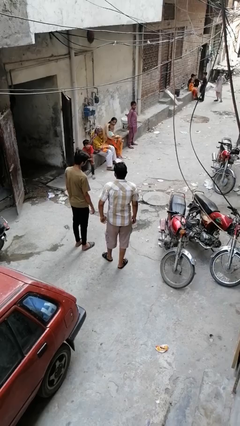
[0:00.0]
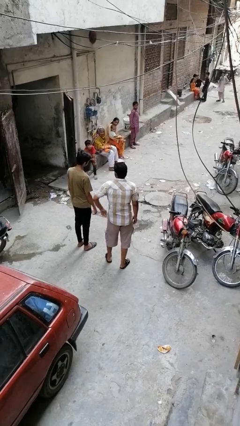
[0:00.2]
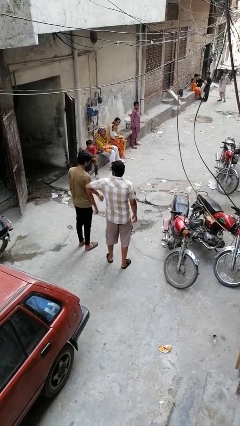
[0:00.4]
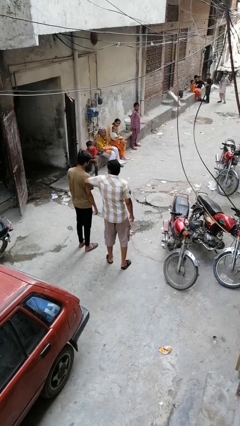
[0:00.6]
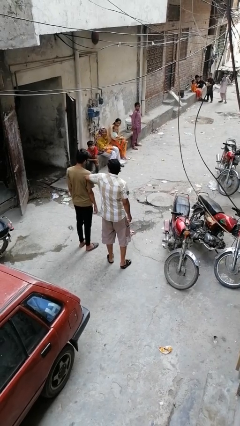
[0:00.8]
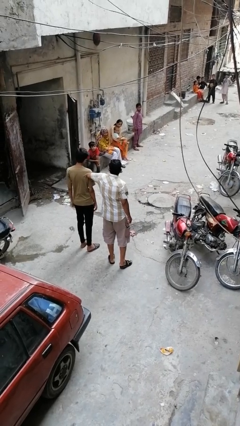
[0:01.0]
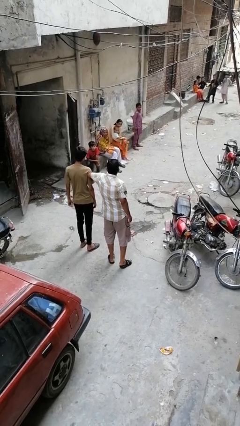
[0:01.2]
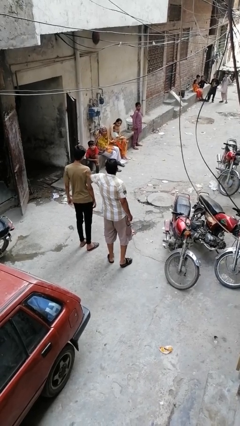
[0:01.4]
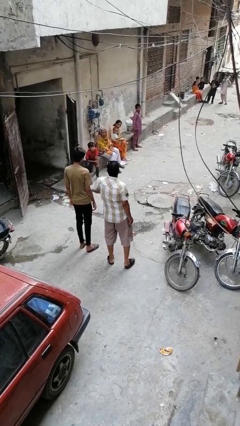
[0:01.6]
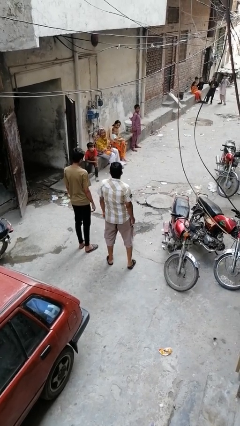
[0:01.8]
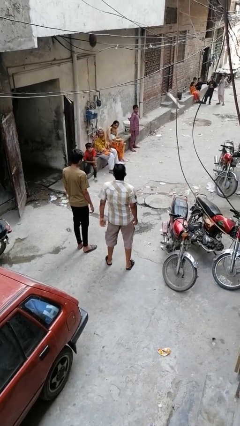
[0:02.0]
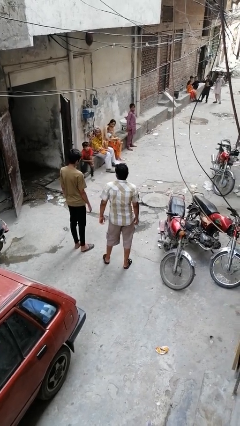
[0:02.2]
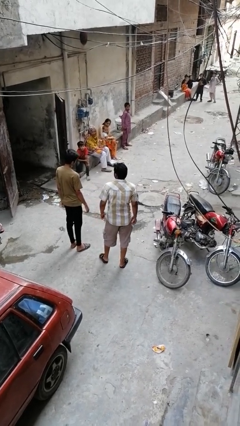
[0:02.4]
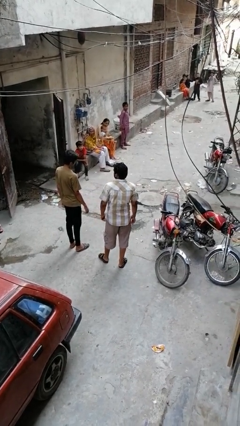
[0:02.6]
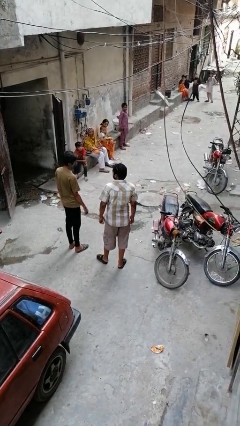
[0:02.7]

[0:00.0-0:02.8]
person nudges person with elbow

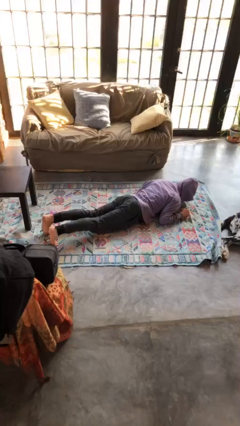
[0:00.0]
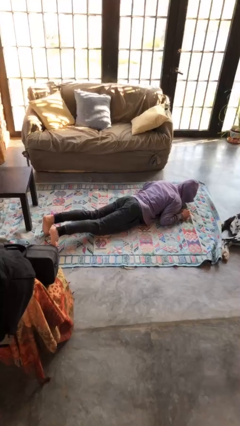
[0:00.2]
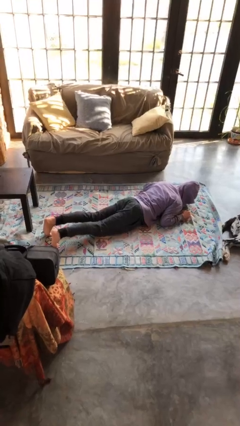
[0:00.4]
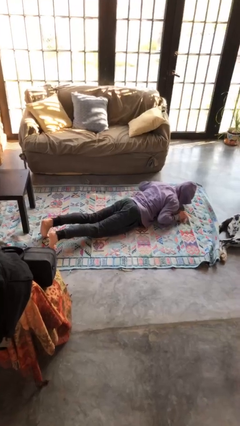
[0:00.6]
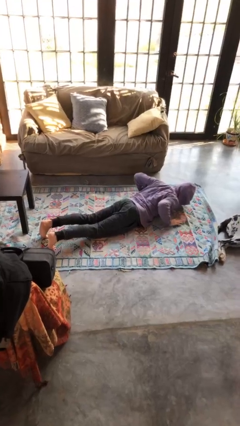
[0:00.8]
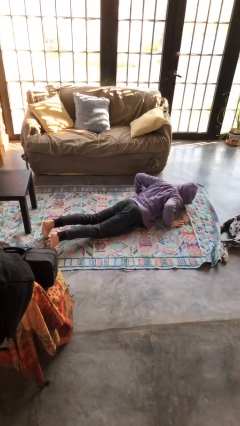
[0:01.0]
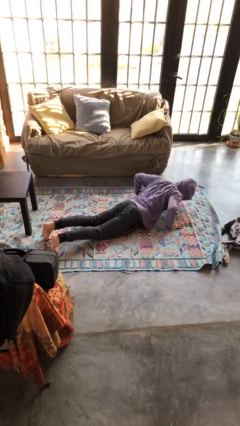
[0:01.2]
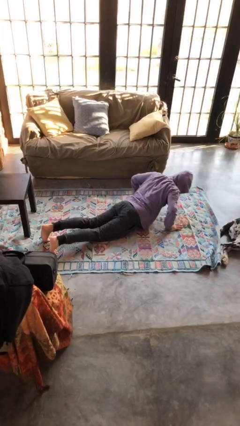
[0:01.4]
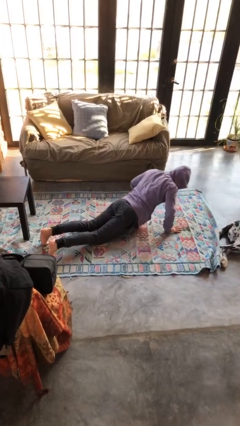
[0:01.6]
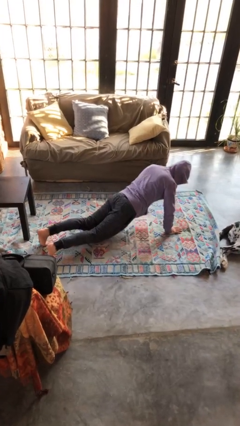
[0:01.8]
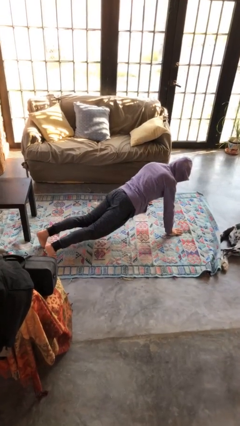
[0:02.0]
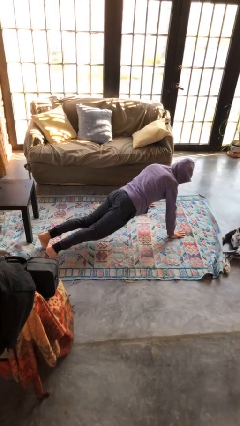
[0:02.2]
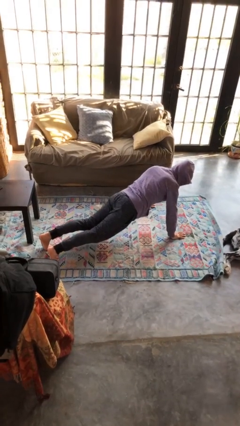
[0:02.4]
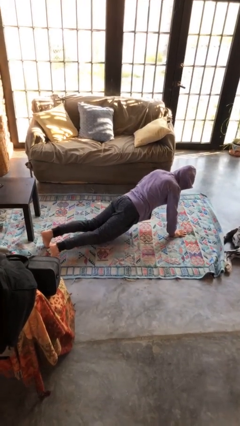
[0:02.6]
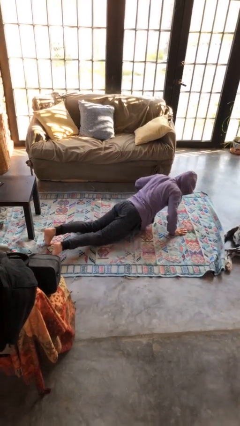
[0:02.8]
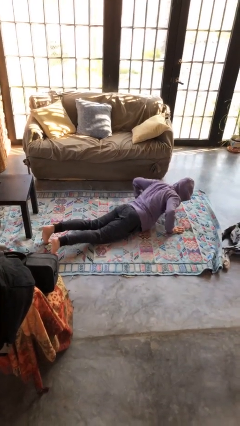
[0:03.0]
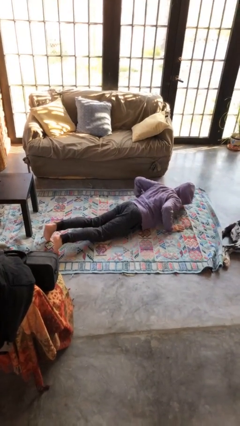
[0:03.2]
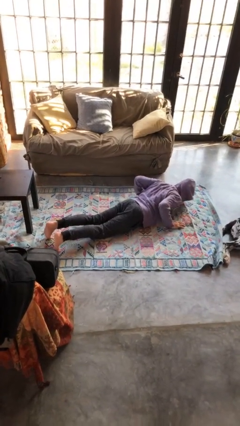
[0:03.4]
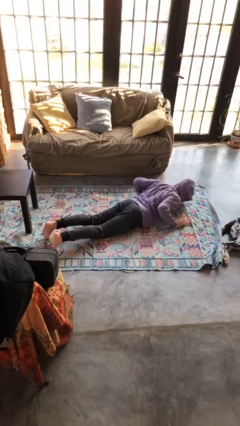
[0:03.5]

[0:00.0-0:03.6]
person exercises with pushup

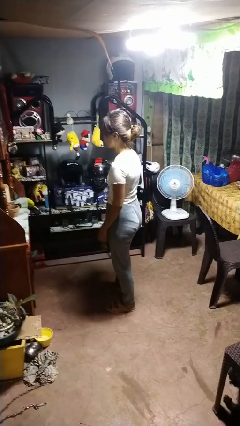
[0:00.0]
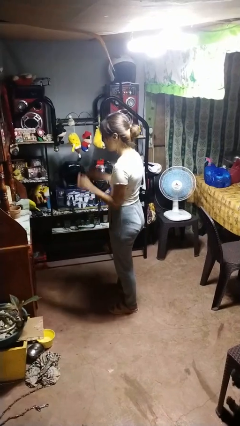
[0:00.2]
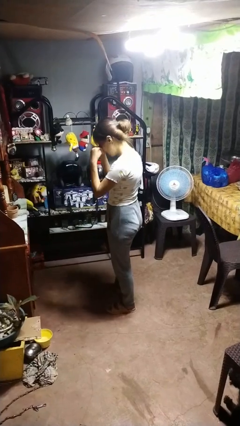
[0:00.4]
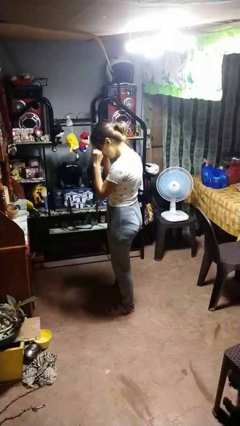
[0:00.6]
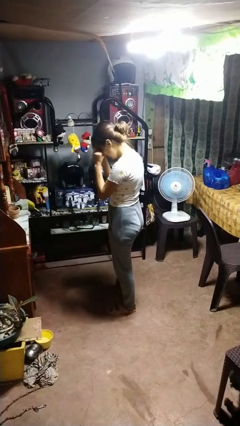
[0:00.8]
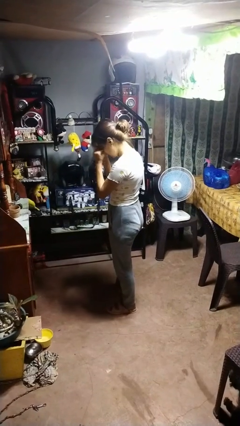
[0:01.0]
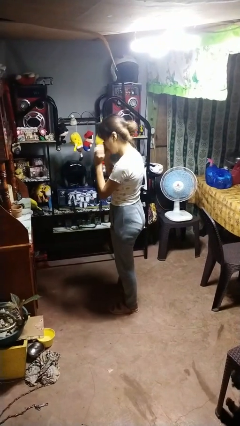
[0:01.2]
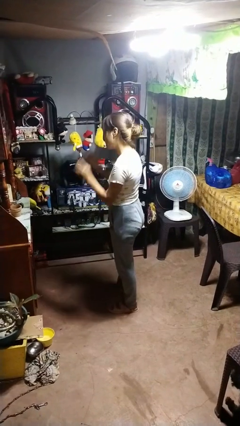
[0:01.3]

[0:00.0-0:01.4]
person rubs eyes

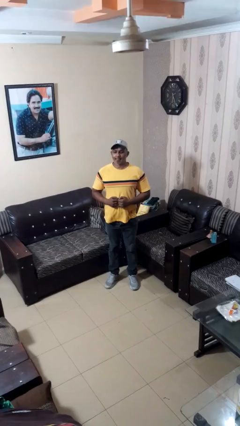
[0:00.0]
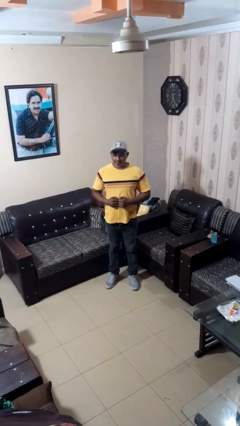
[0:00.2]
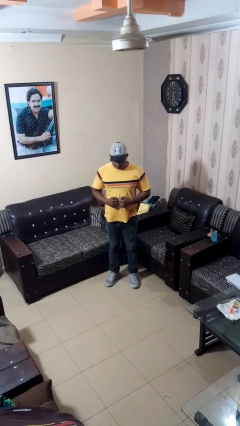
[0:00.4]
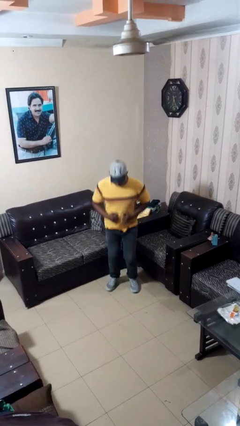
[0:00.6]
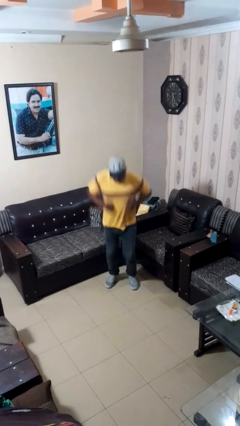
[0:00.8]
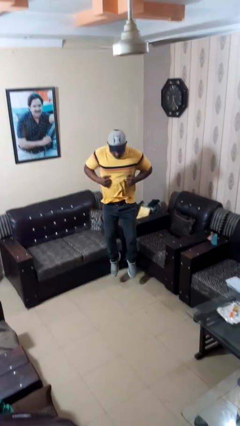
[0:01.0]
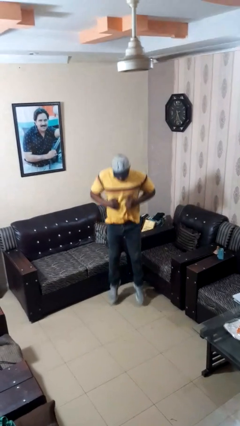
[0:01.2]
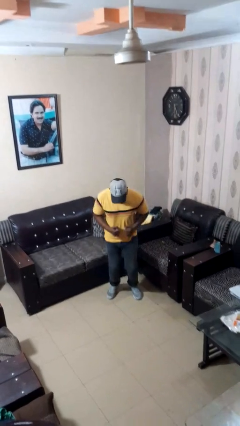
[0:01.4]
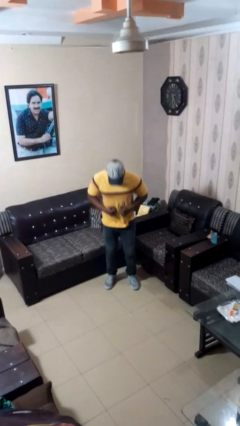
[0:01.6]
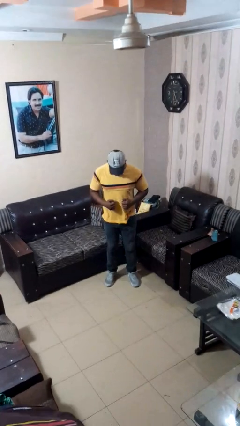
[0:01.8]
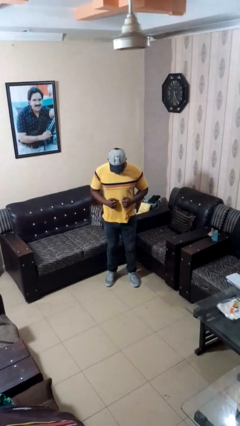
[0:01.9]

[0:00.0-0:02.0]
person jumps

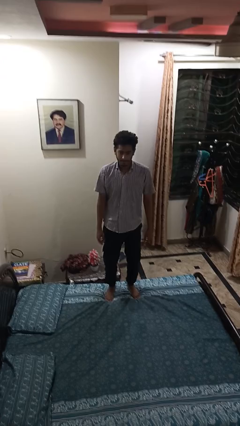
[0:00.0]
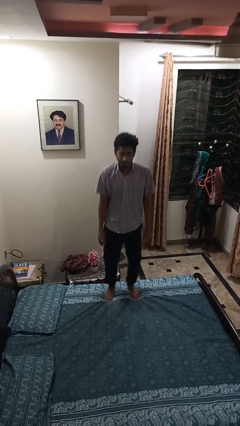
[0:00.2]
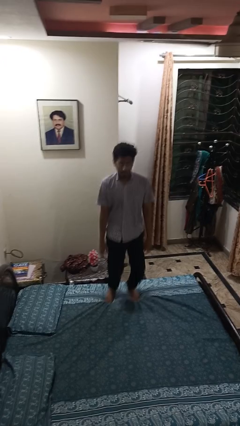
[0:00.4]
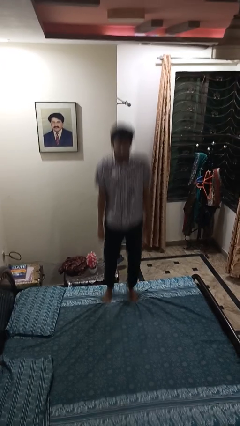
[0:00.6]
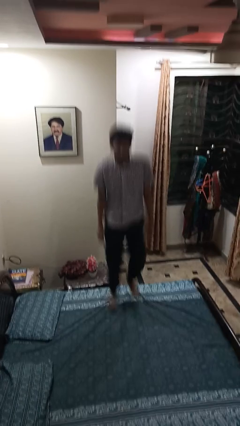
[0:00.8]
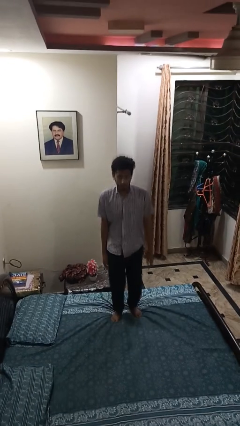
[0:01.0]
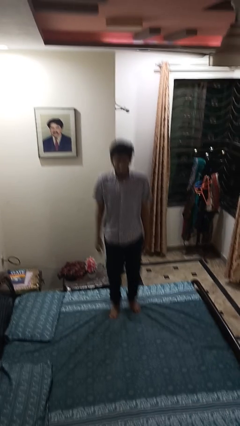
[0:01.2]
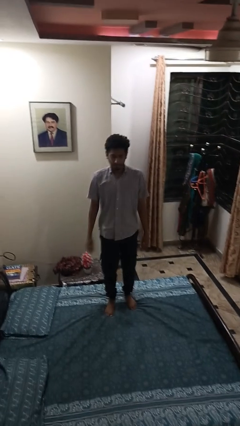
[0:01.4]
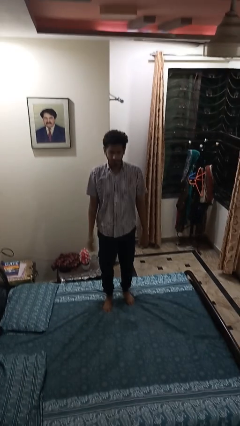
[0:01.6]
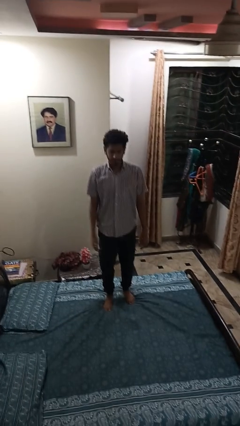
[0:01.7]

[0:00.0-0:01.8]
person jumps on bed

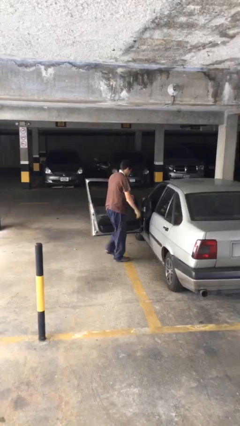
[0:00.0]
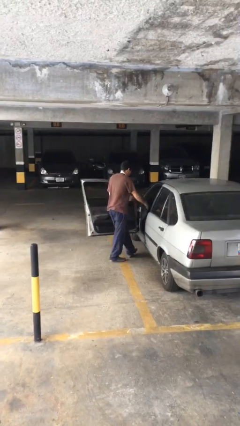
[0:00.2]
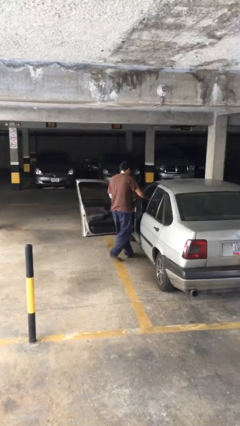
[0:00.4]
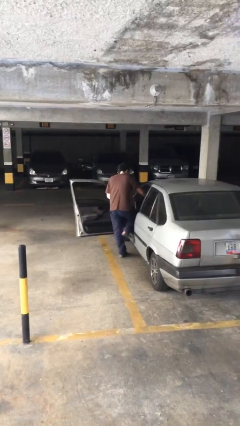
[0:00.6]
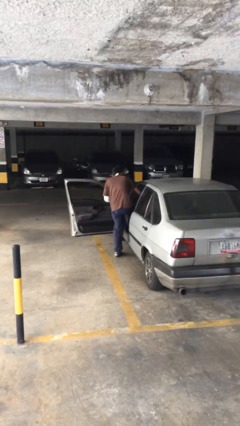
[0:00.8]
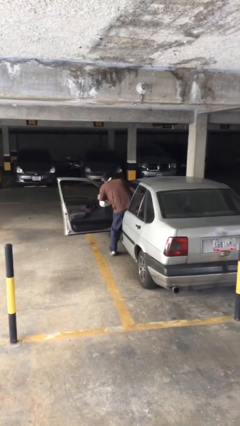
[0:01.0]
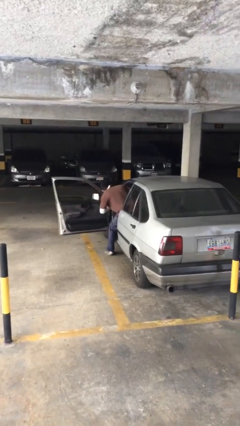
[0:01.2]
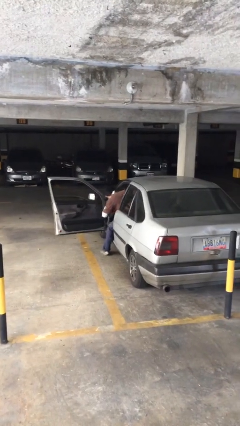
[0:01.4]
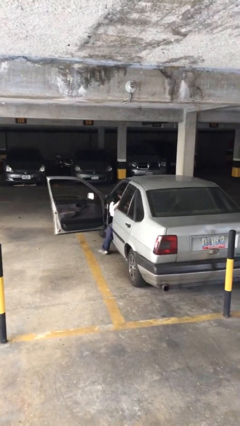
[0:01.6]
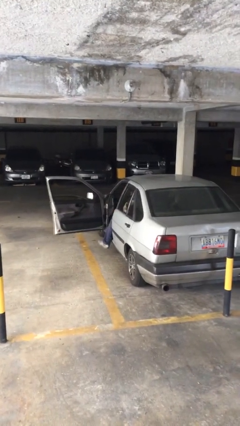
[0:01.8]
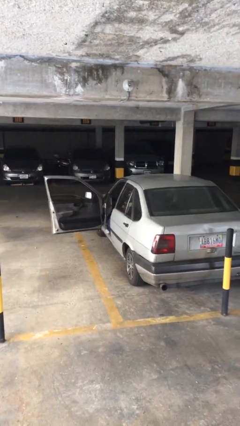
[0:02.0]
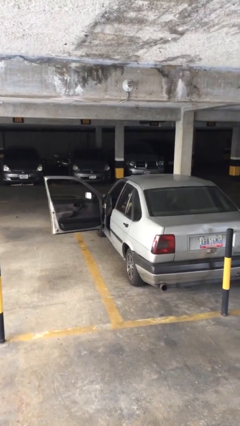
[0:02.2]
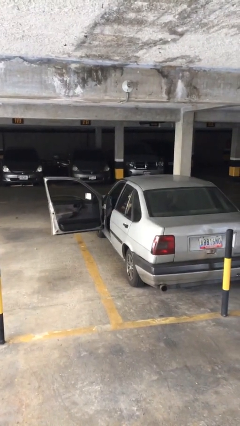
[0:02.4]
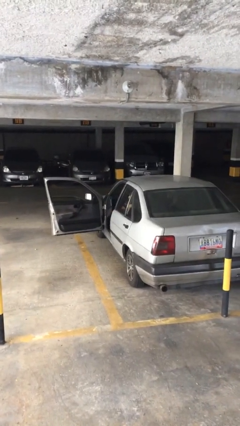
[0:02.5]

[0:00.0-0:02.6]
person enters car

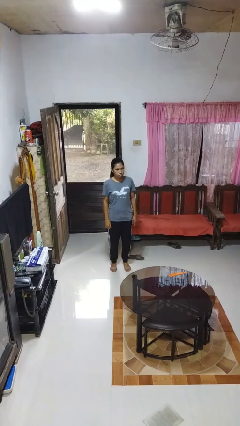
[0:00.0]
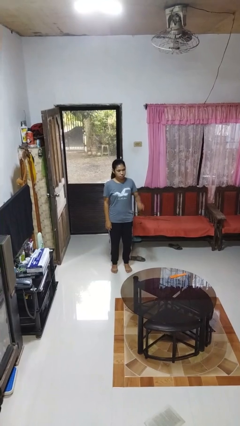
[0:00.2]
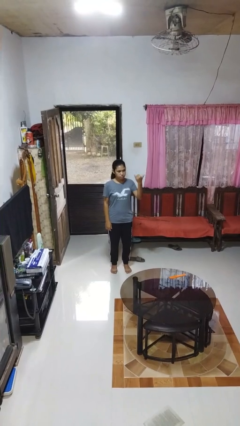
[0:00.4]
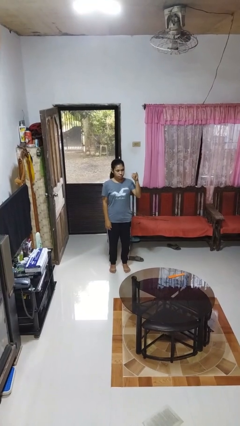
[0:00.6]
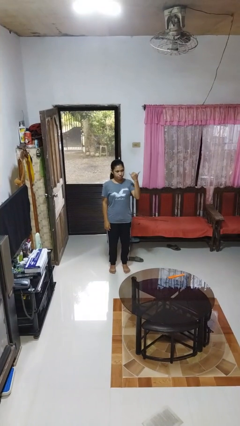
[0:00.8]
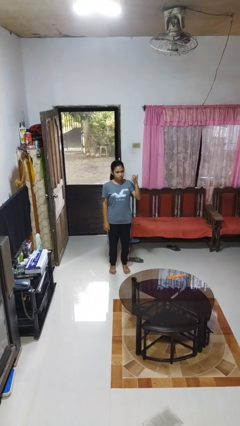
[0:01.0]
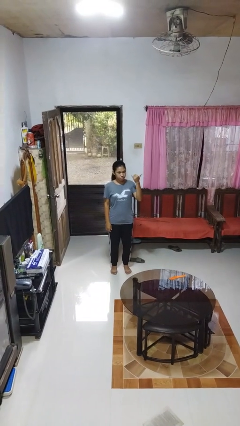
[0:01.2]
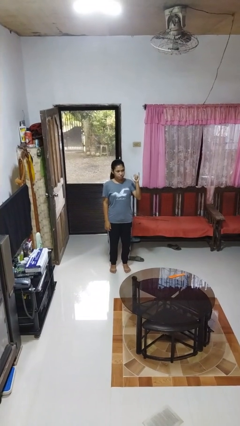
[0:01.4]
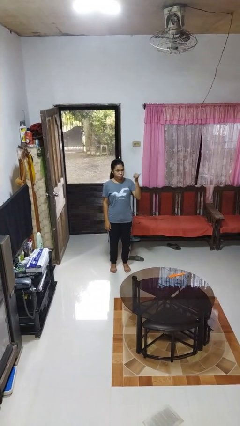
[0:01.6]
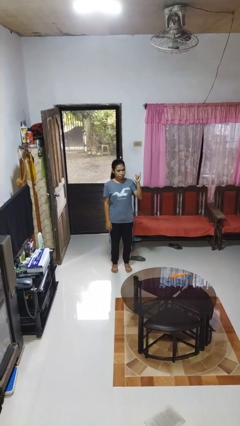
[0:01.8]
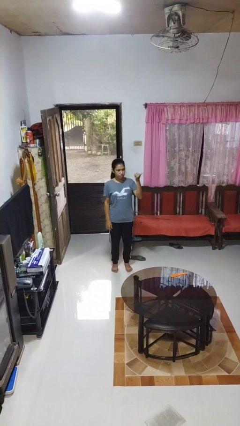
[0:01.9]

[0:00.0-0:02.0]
person gestures hang loose

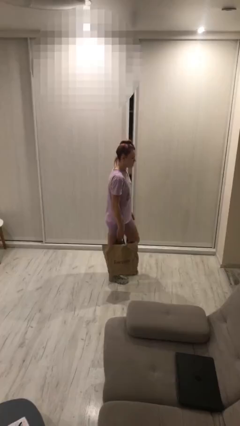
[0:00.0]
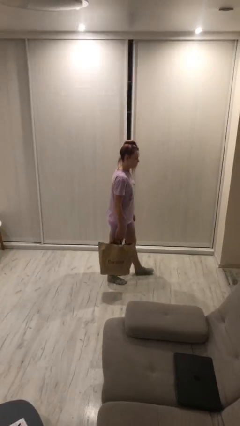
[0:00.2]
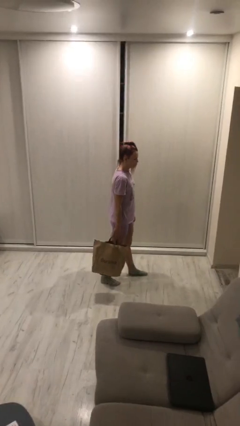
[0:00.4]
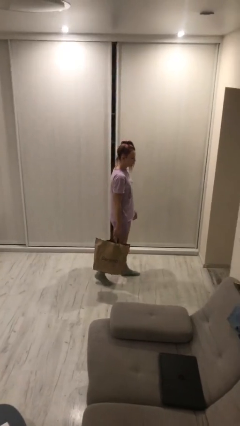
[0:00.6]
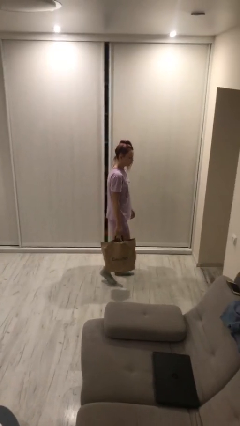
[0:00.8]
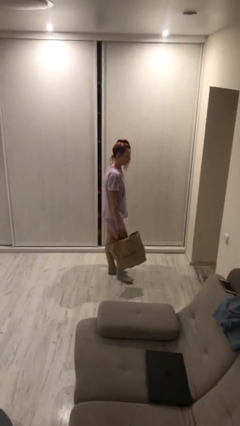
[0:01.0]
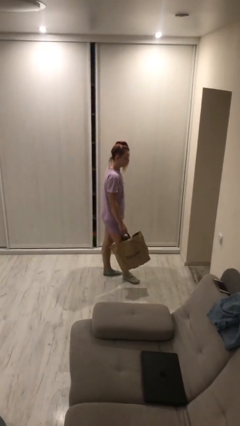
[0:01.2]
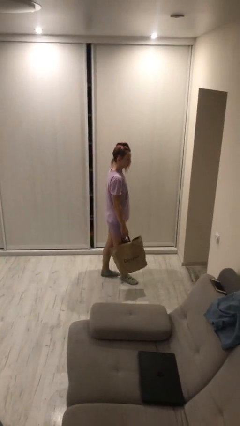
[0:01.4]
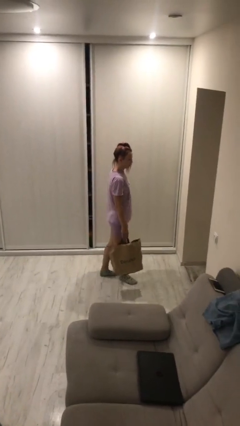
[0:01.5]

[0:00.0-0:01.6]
person carries groceries
